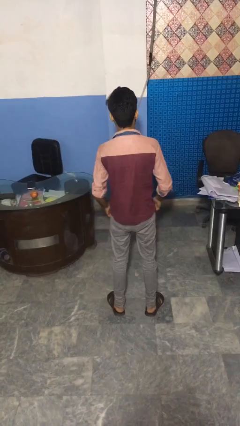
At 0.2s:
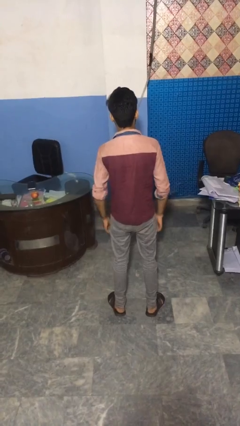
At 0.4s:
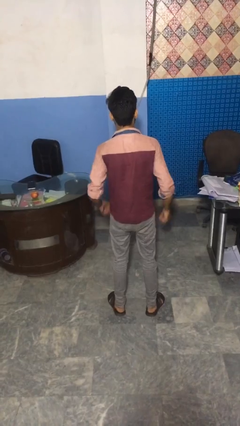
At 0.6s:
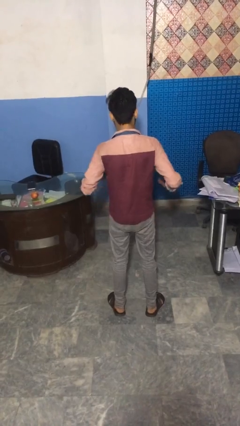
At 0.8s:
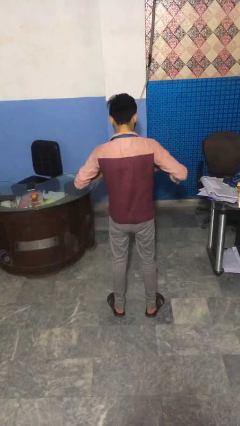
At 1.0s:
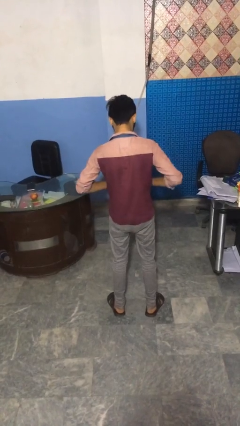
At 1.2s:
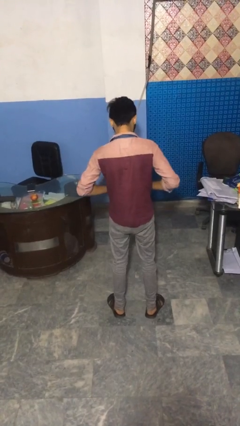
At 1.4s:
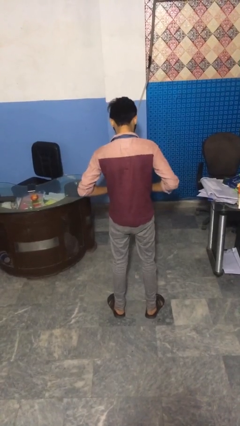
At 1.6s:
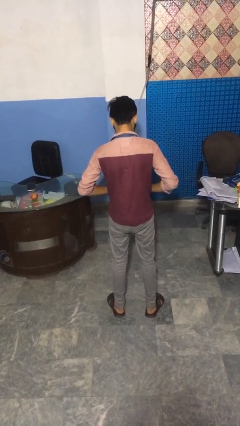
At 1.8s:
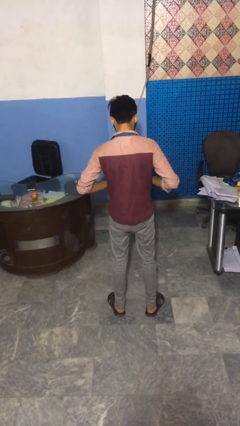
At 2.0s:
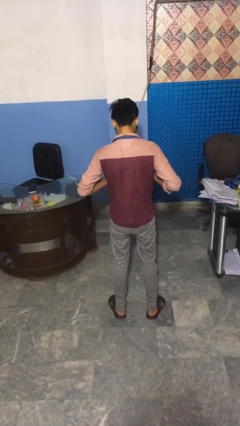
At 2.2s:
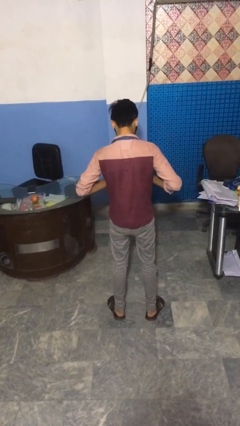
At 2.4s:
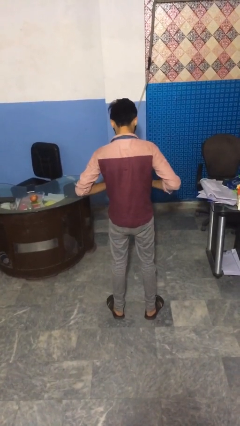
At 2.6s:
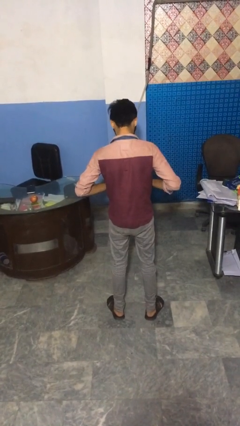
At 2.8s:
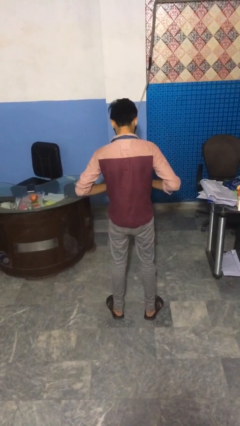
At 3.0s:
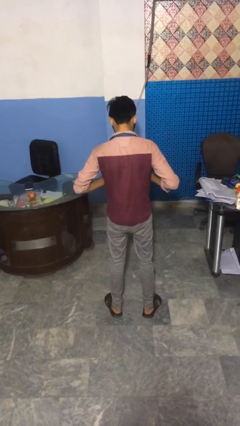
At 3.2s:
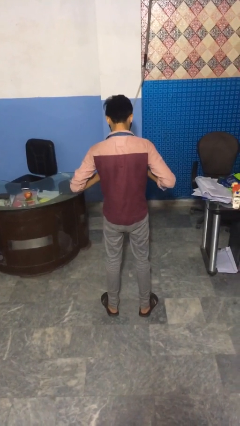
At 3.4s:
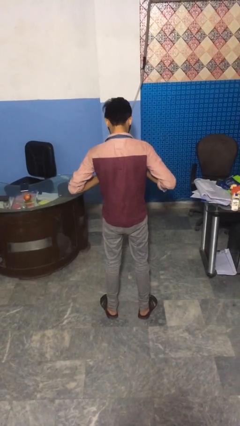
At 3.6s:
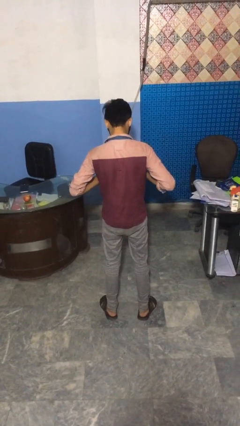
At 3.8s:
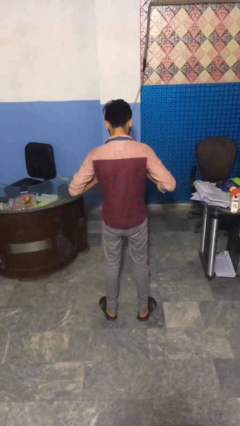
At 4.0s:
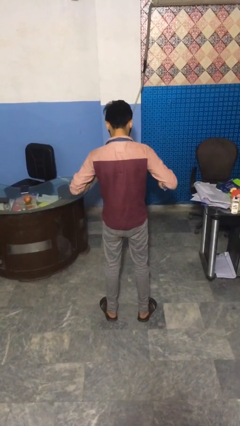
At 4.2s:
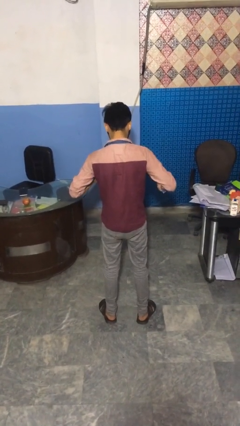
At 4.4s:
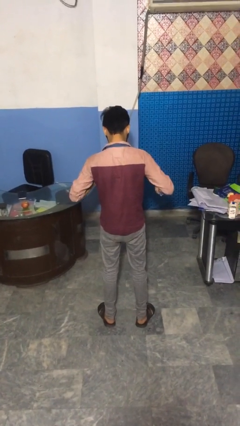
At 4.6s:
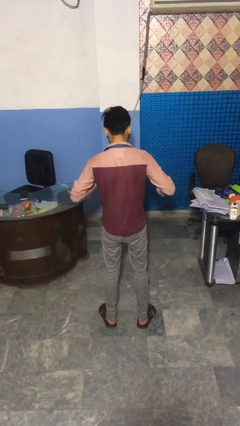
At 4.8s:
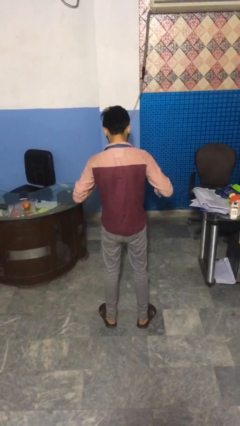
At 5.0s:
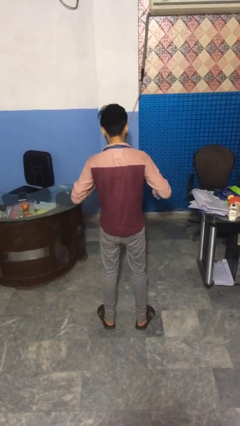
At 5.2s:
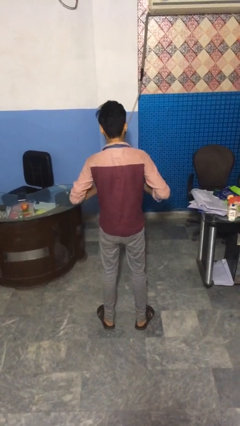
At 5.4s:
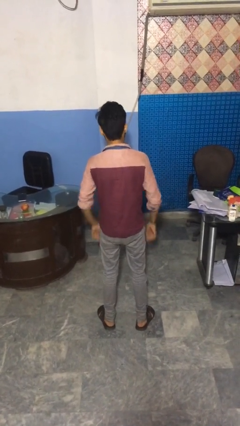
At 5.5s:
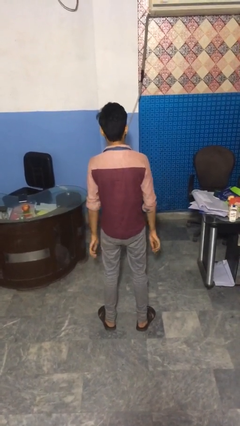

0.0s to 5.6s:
person buttons shirt

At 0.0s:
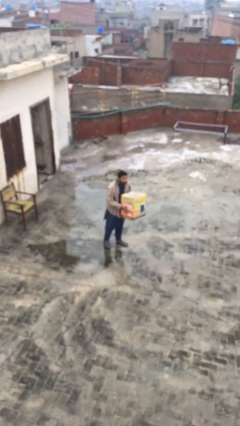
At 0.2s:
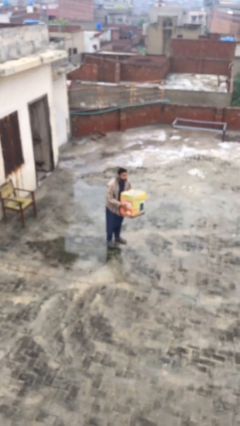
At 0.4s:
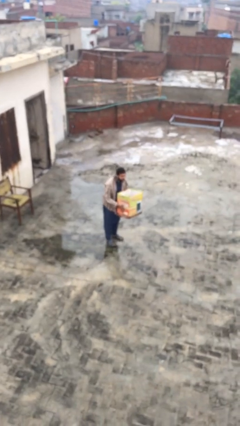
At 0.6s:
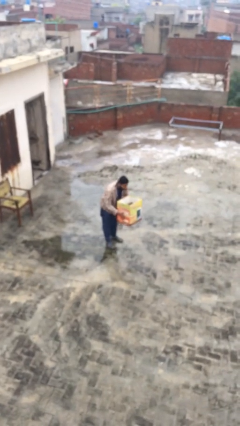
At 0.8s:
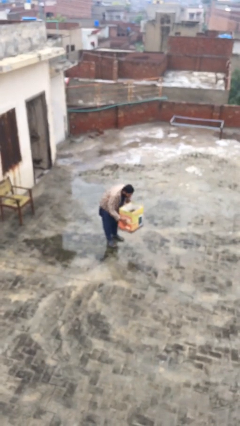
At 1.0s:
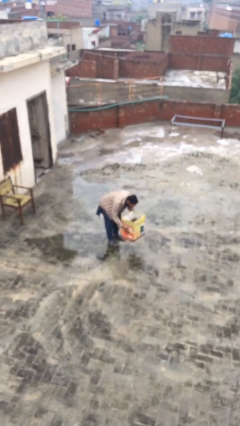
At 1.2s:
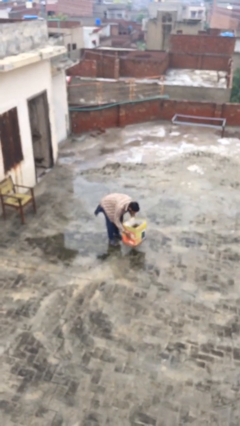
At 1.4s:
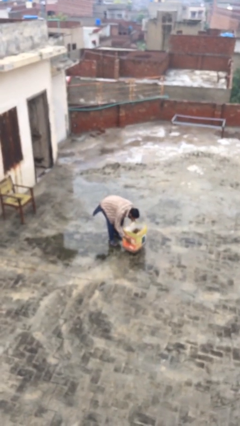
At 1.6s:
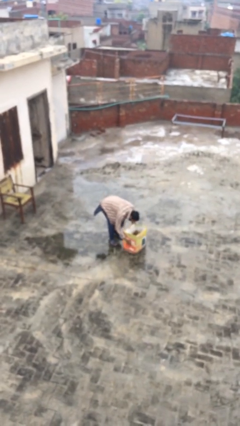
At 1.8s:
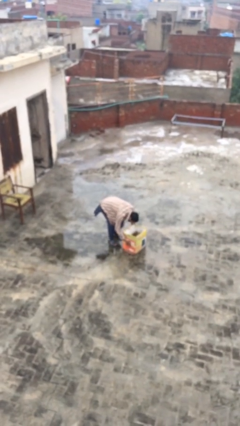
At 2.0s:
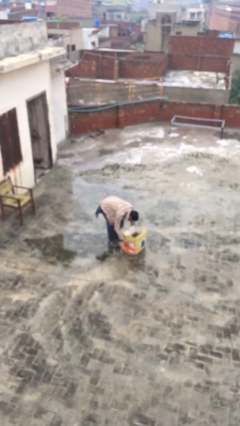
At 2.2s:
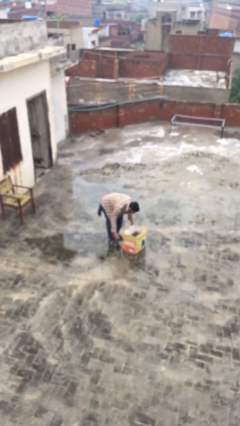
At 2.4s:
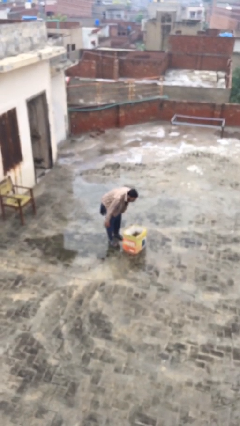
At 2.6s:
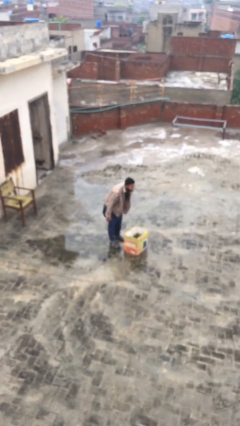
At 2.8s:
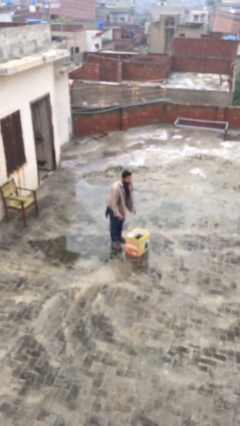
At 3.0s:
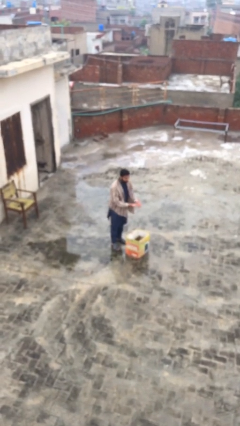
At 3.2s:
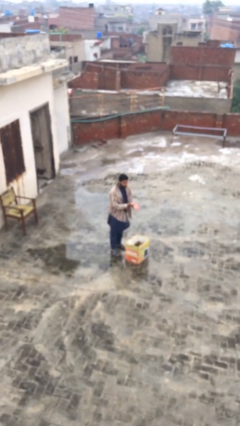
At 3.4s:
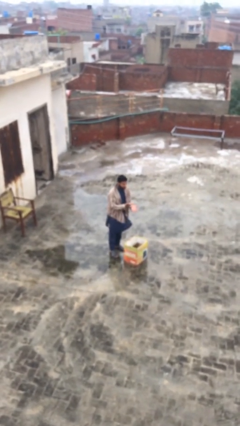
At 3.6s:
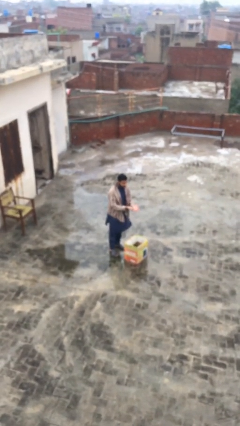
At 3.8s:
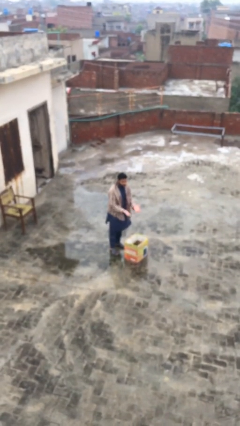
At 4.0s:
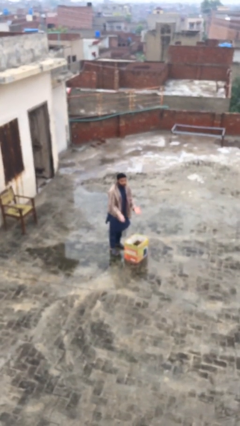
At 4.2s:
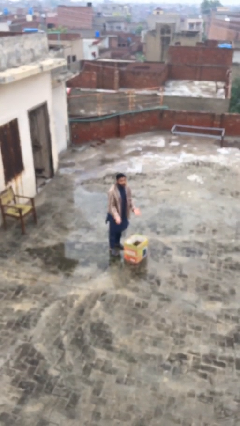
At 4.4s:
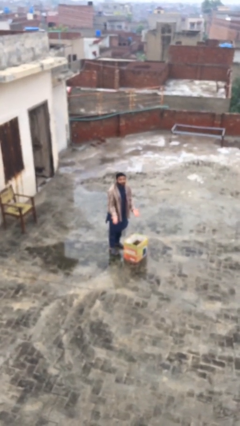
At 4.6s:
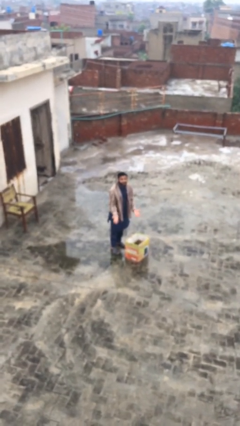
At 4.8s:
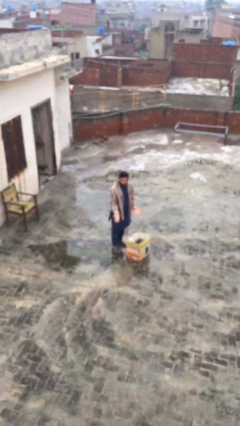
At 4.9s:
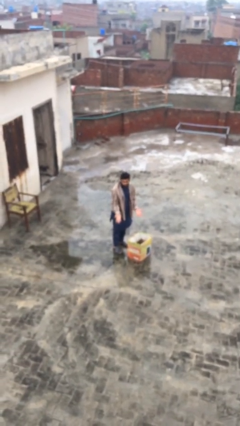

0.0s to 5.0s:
person puts down object on floor

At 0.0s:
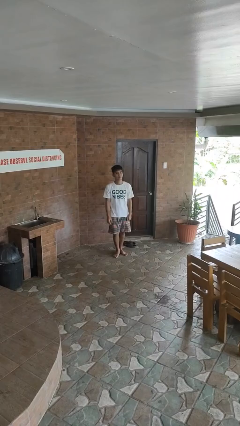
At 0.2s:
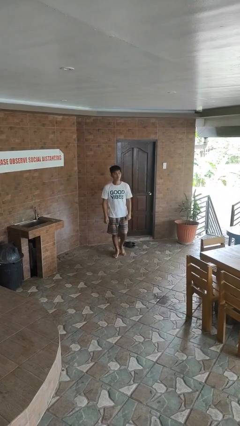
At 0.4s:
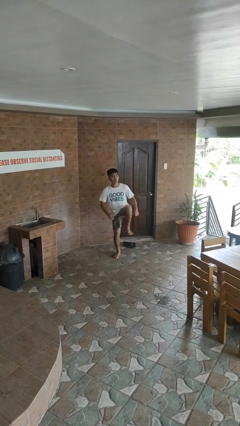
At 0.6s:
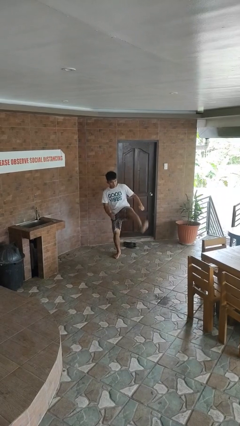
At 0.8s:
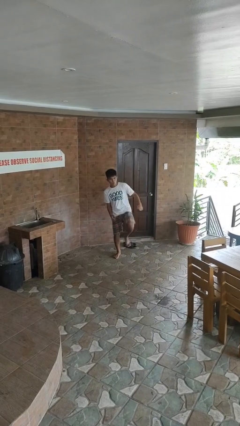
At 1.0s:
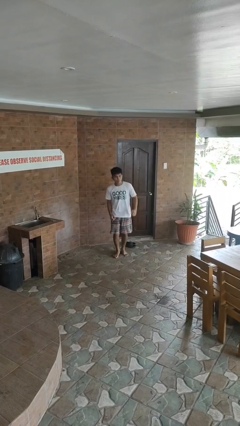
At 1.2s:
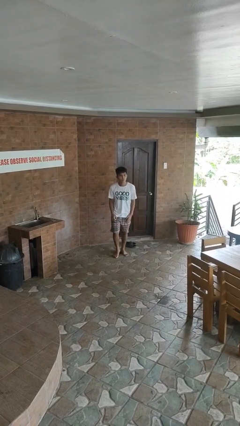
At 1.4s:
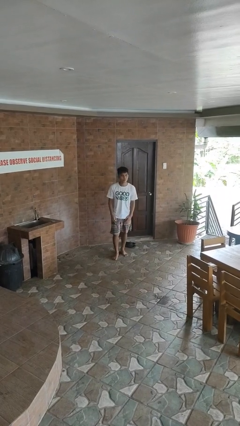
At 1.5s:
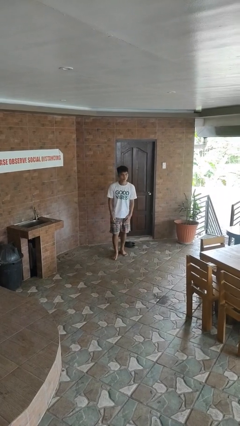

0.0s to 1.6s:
person karate kicks

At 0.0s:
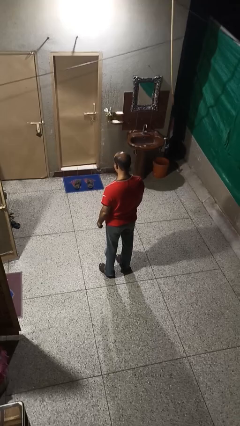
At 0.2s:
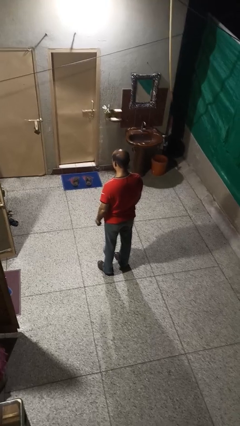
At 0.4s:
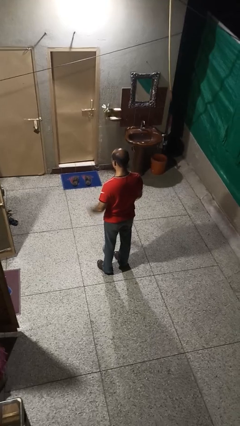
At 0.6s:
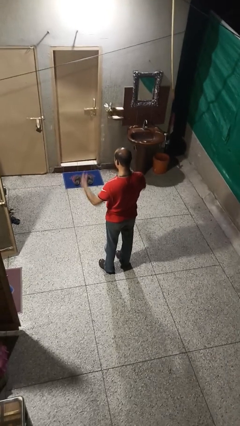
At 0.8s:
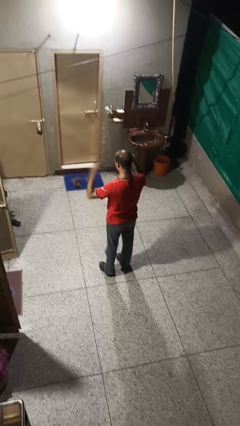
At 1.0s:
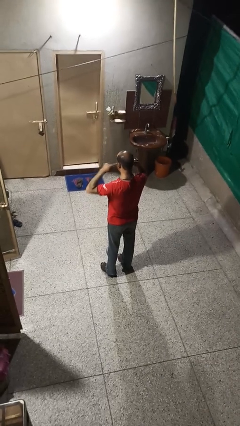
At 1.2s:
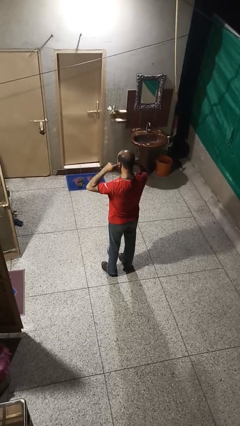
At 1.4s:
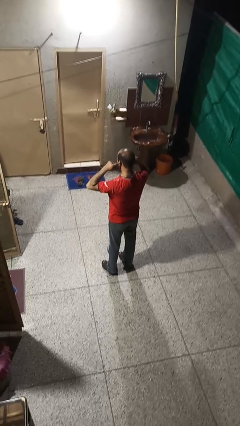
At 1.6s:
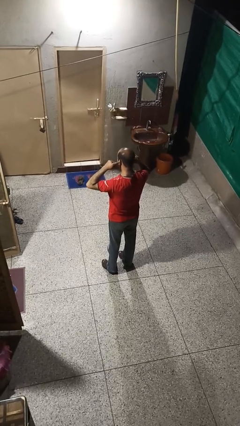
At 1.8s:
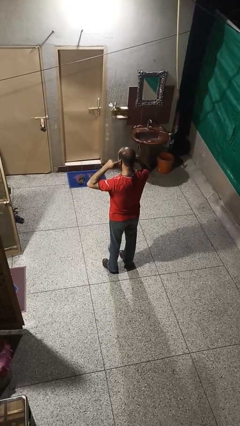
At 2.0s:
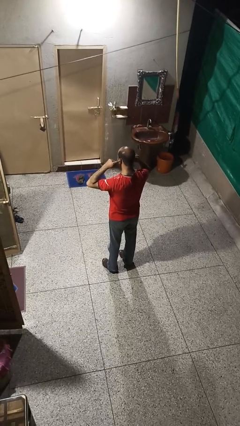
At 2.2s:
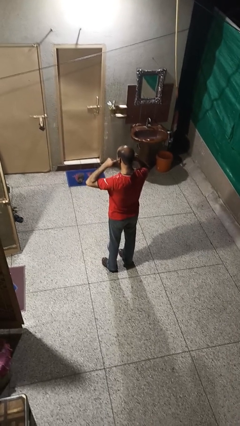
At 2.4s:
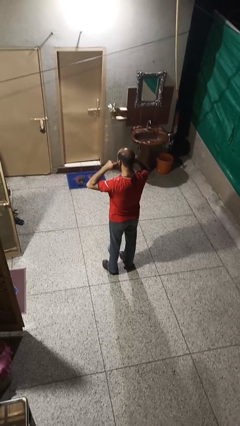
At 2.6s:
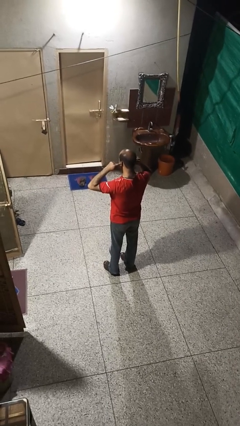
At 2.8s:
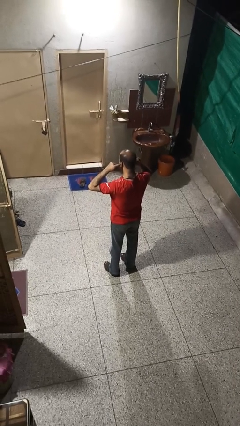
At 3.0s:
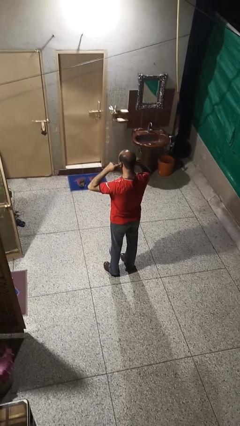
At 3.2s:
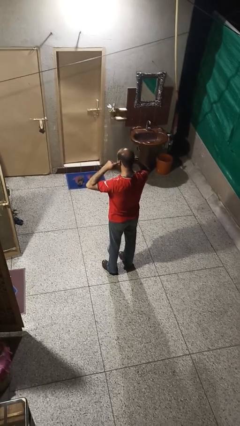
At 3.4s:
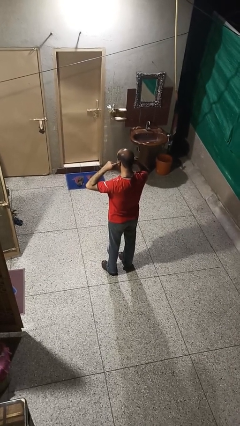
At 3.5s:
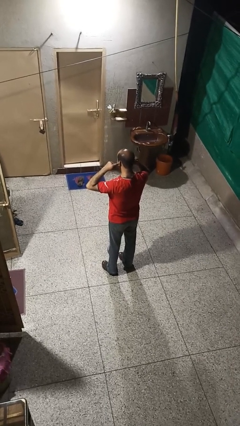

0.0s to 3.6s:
person puts fingers in ear

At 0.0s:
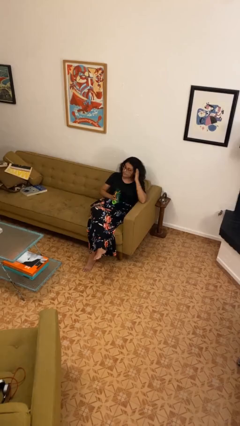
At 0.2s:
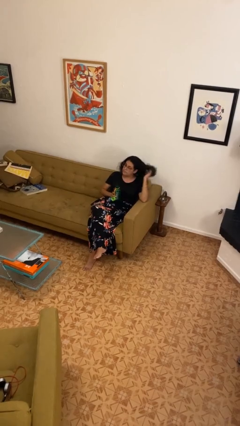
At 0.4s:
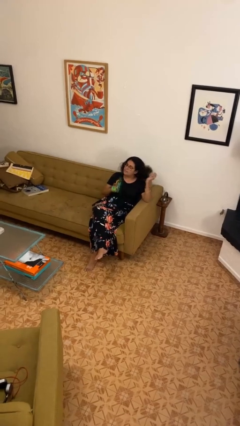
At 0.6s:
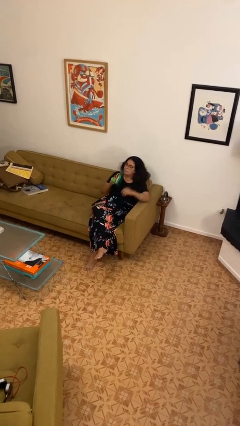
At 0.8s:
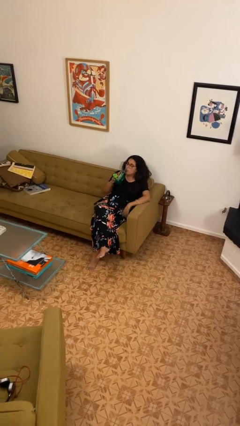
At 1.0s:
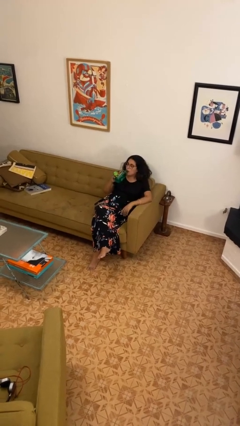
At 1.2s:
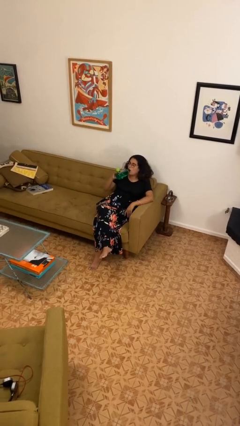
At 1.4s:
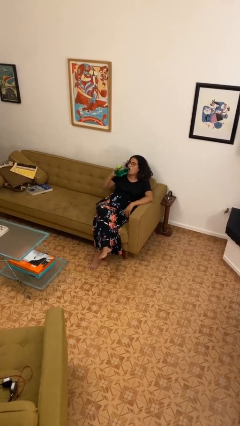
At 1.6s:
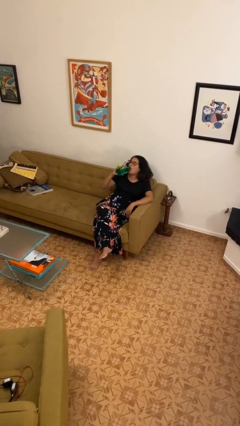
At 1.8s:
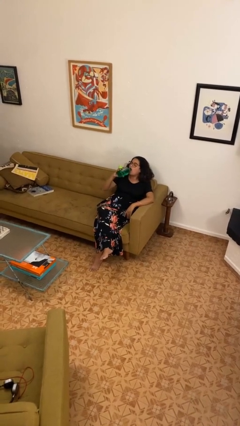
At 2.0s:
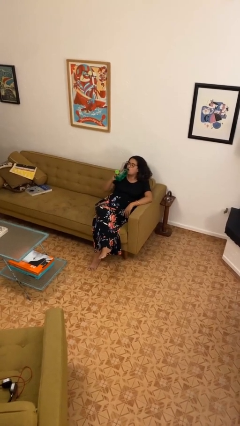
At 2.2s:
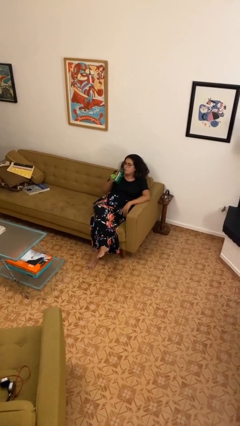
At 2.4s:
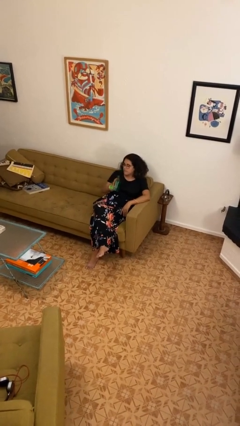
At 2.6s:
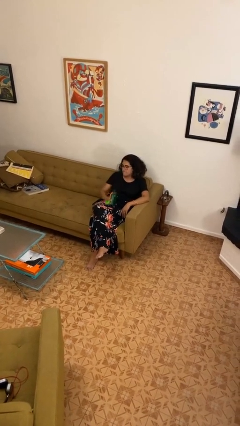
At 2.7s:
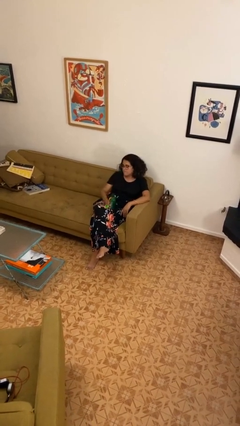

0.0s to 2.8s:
person drinks from bottle
